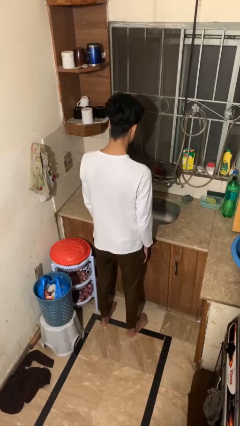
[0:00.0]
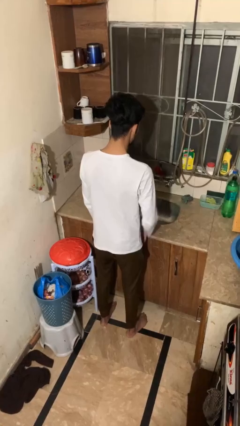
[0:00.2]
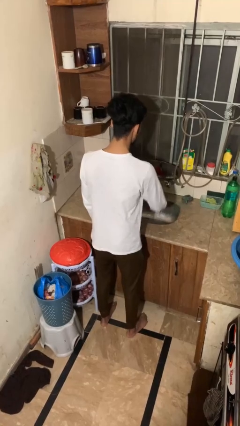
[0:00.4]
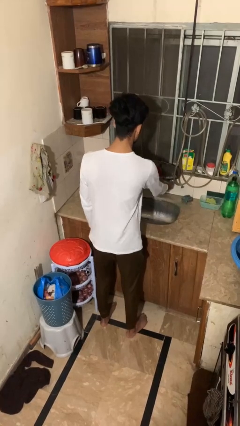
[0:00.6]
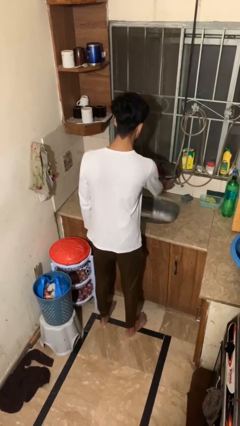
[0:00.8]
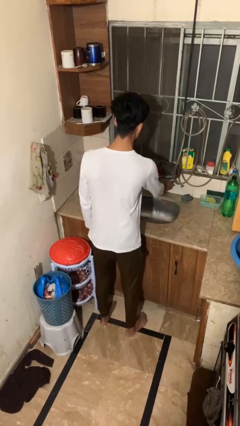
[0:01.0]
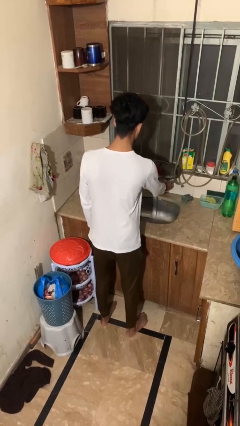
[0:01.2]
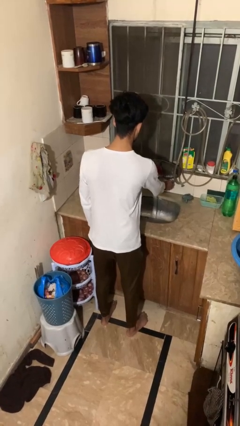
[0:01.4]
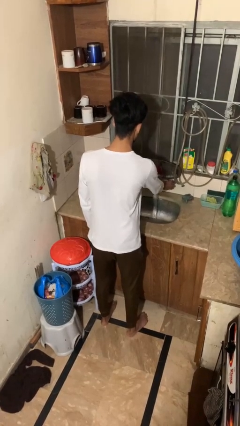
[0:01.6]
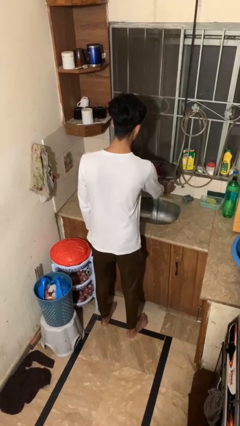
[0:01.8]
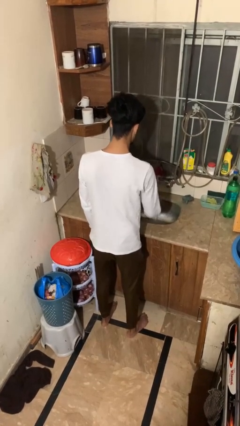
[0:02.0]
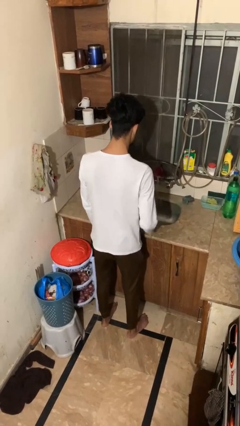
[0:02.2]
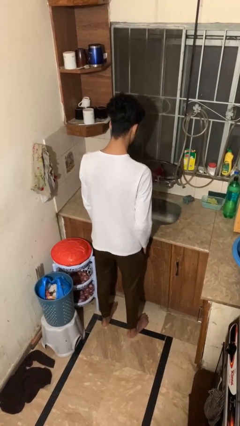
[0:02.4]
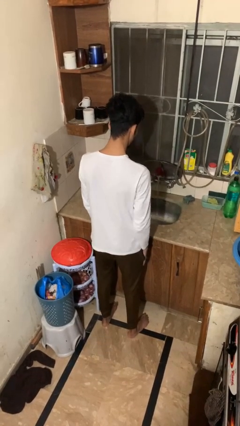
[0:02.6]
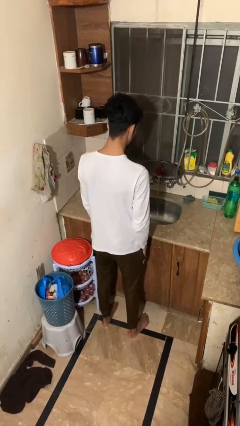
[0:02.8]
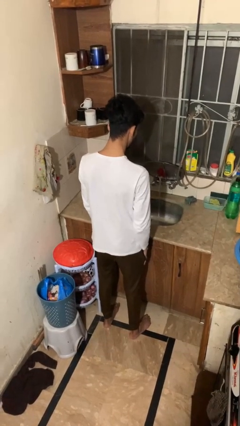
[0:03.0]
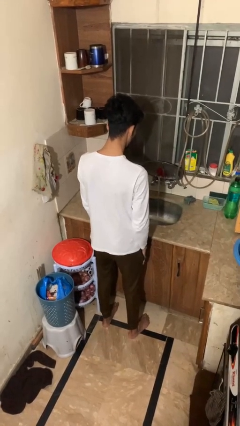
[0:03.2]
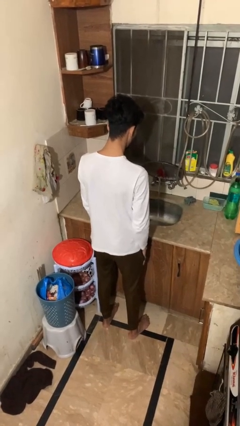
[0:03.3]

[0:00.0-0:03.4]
person turns on faucet

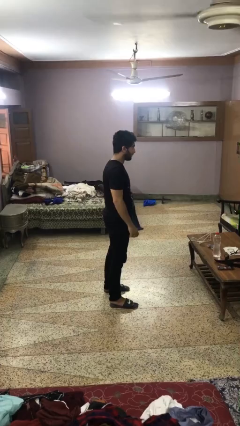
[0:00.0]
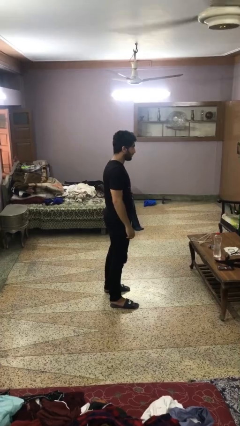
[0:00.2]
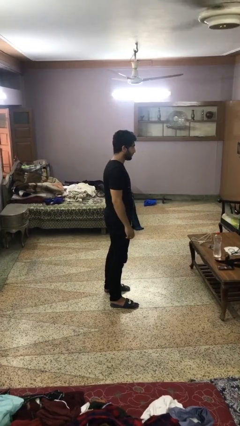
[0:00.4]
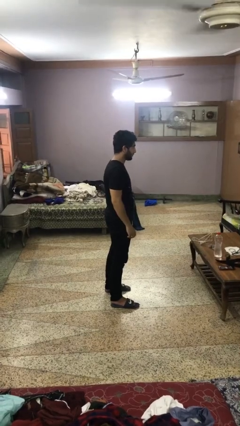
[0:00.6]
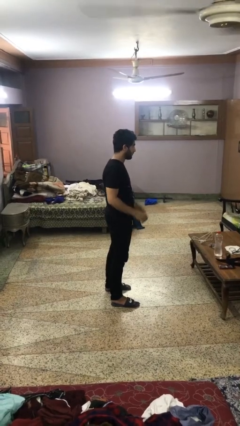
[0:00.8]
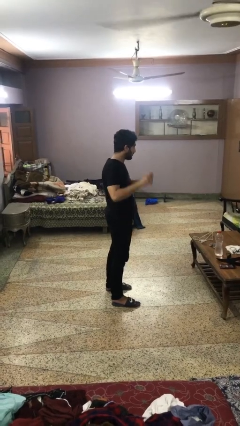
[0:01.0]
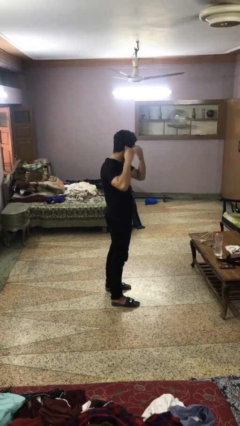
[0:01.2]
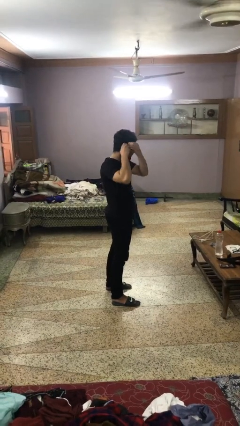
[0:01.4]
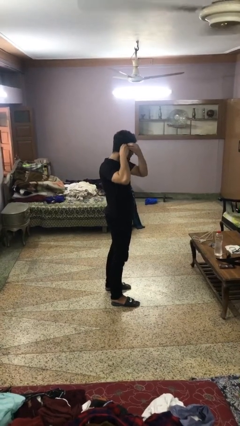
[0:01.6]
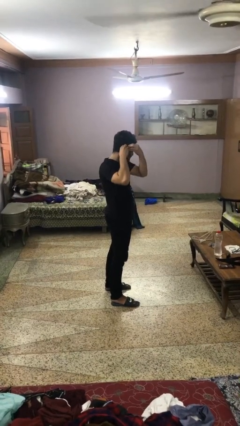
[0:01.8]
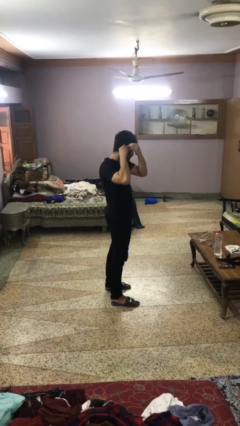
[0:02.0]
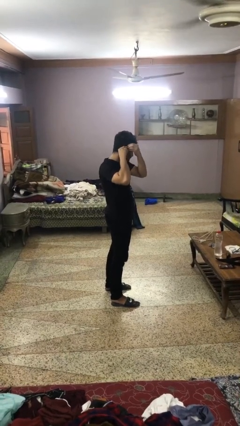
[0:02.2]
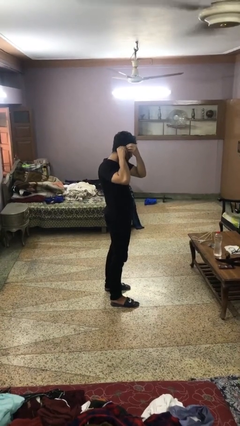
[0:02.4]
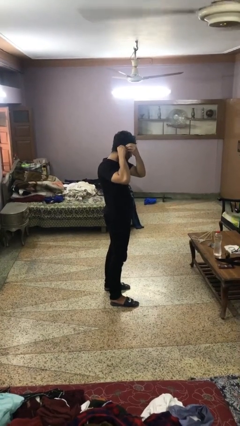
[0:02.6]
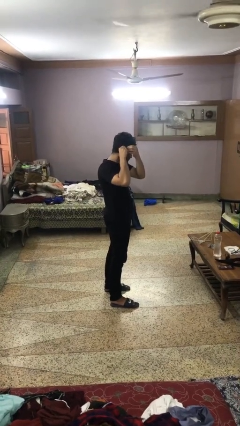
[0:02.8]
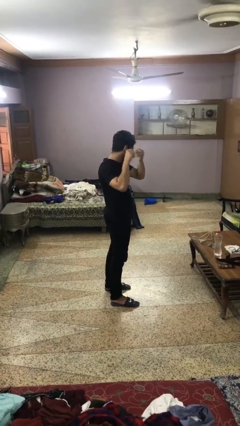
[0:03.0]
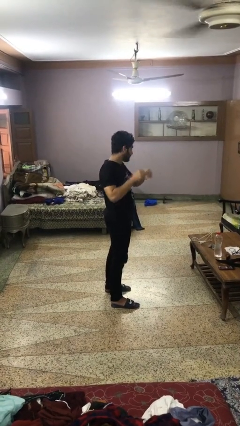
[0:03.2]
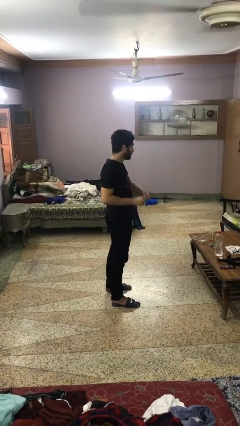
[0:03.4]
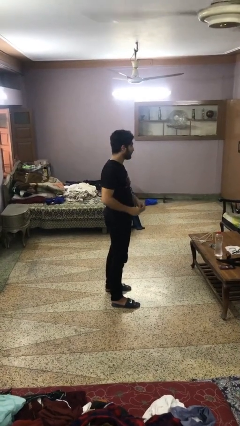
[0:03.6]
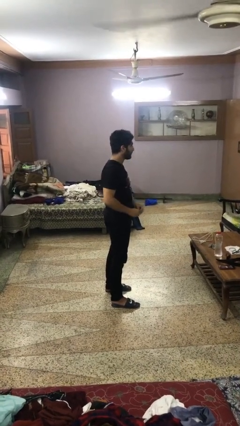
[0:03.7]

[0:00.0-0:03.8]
person takes off earrings

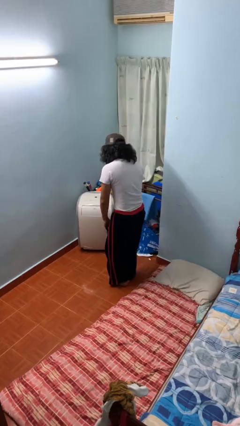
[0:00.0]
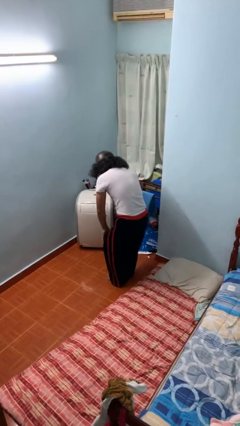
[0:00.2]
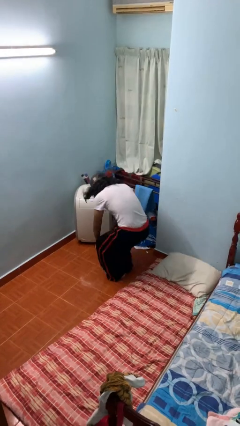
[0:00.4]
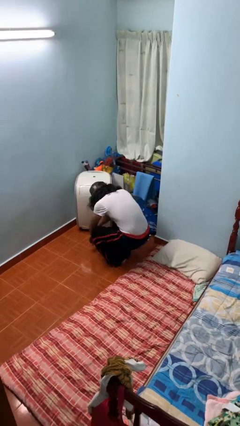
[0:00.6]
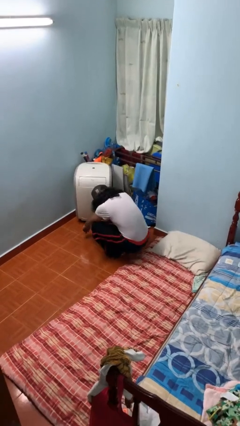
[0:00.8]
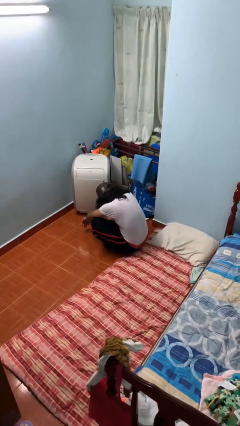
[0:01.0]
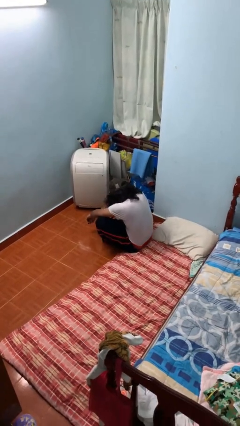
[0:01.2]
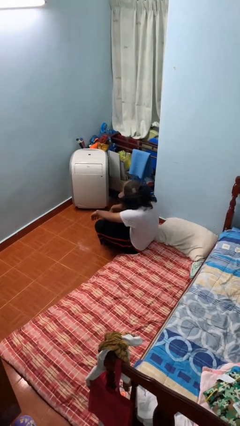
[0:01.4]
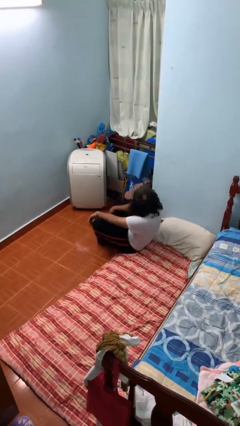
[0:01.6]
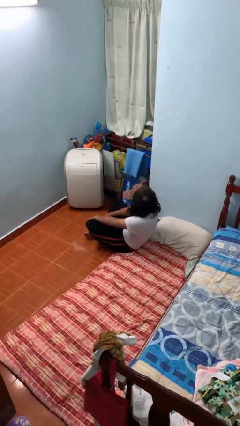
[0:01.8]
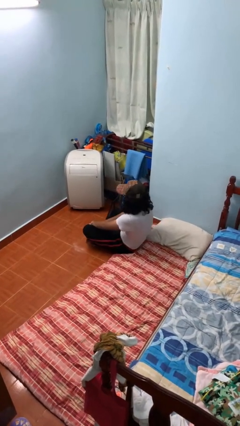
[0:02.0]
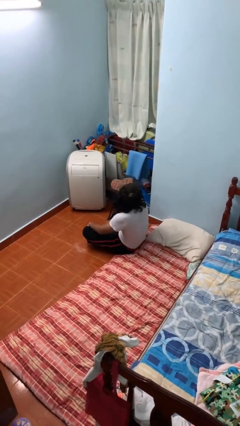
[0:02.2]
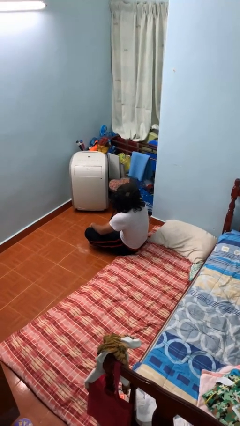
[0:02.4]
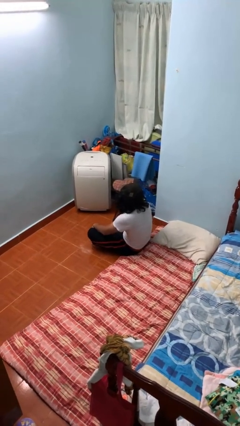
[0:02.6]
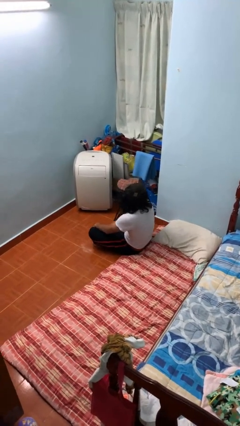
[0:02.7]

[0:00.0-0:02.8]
person sits crisscross

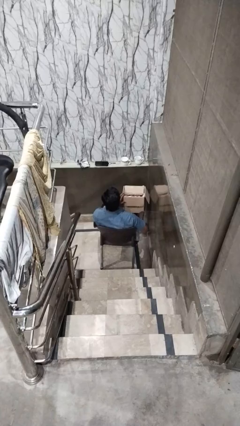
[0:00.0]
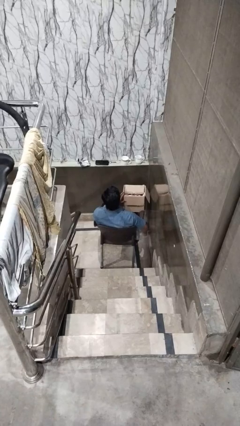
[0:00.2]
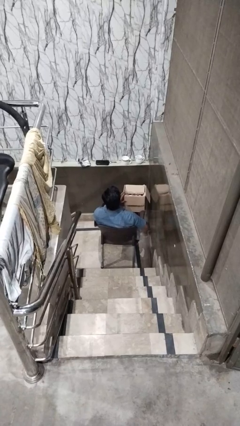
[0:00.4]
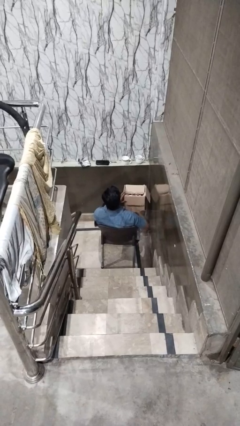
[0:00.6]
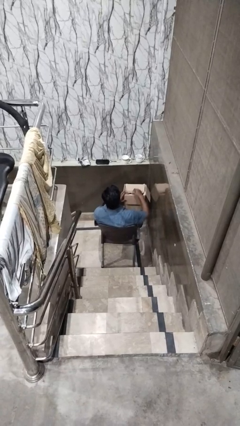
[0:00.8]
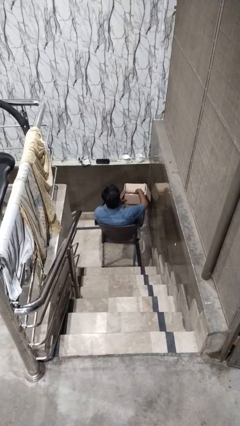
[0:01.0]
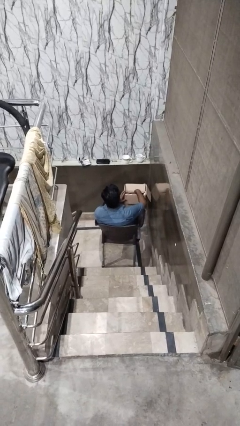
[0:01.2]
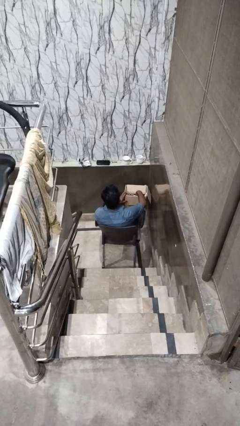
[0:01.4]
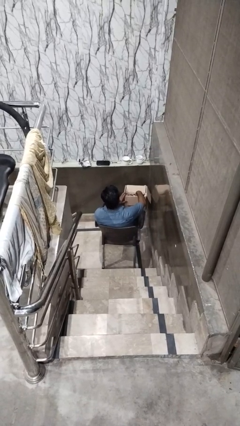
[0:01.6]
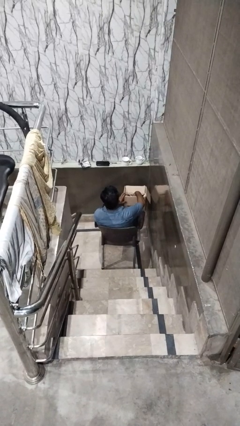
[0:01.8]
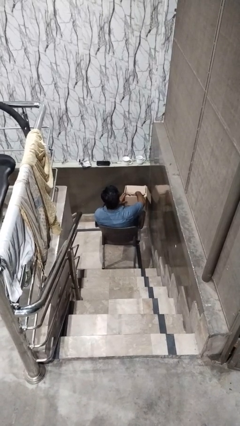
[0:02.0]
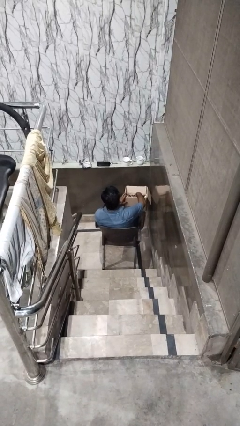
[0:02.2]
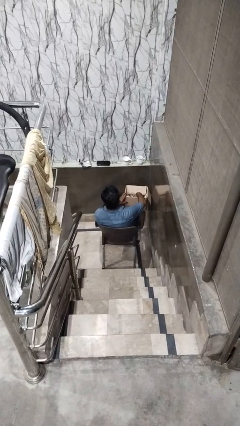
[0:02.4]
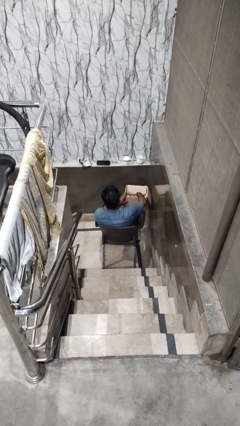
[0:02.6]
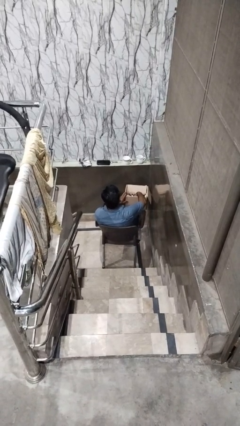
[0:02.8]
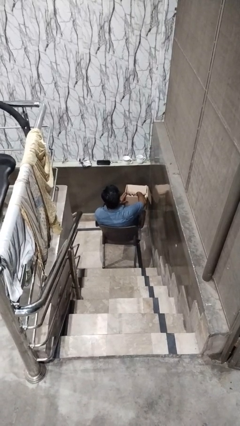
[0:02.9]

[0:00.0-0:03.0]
person searches in box

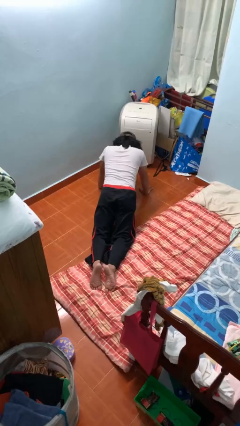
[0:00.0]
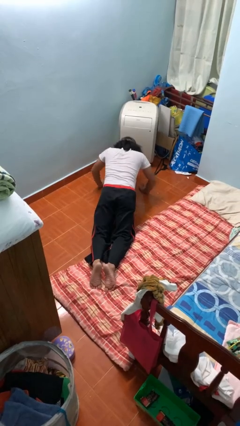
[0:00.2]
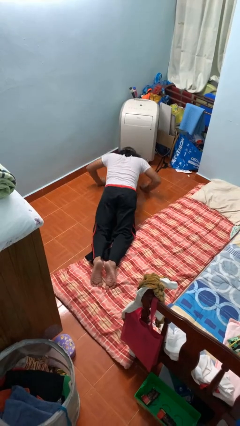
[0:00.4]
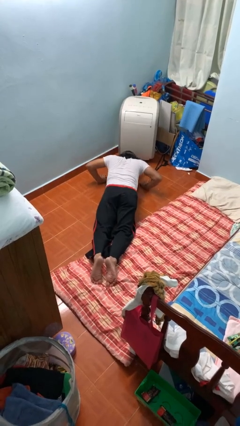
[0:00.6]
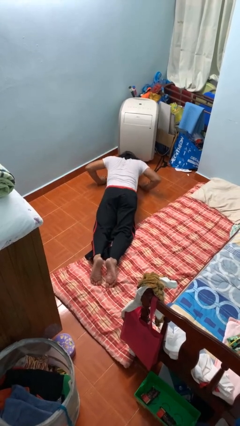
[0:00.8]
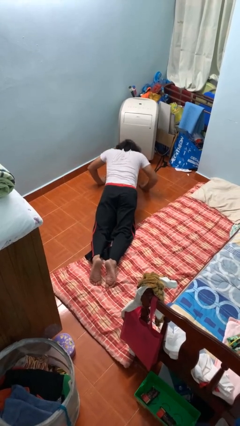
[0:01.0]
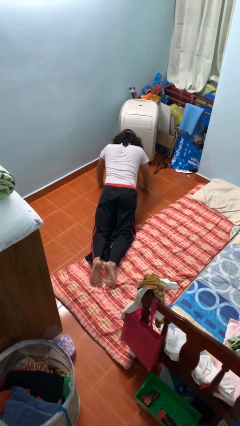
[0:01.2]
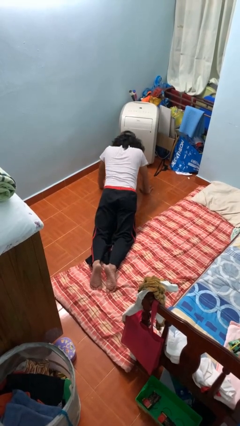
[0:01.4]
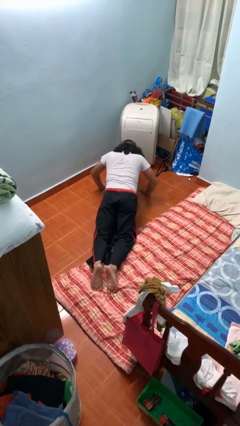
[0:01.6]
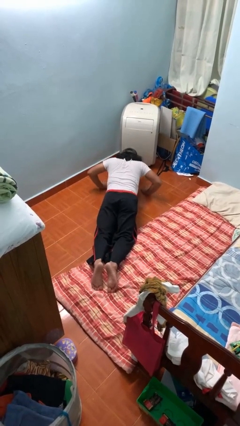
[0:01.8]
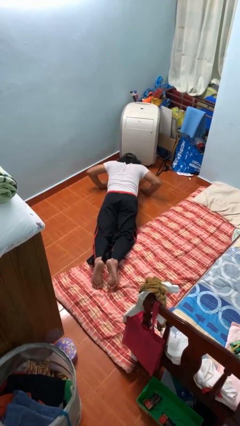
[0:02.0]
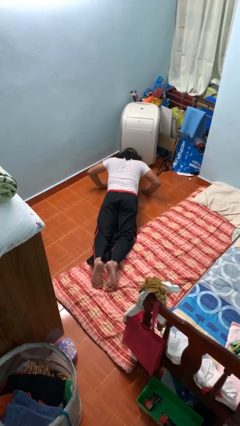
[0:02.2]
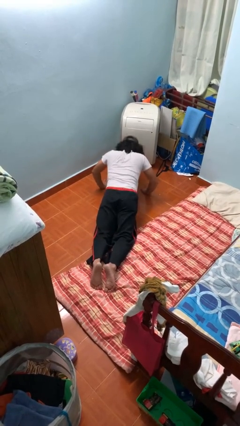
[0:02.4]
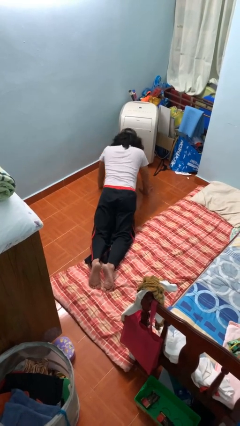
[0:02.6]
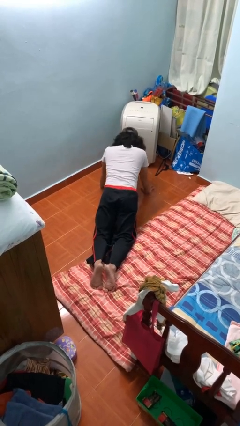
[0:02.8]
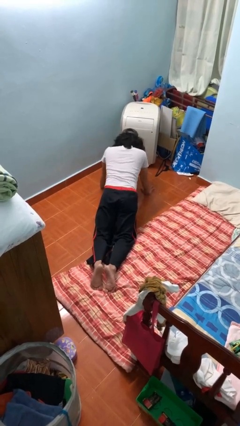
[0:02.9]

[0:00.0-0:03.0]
person exercises with pushup

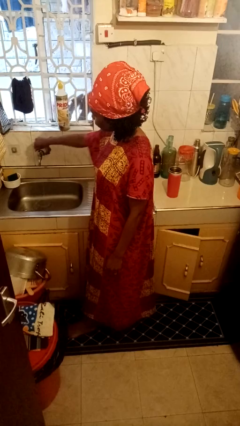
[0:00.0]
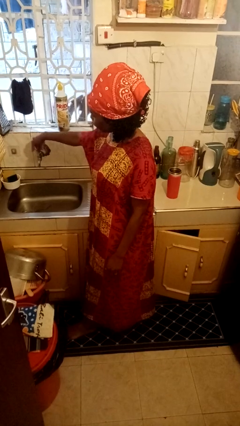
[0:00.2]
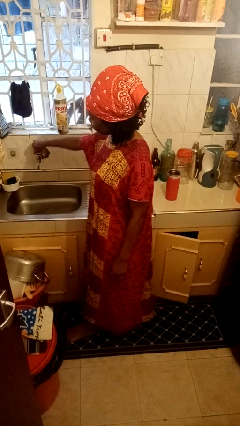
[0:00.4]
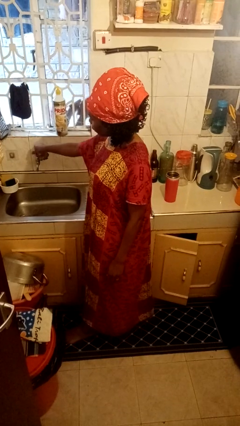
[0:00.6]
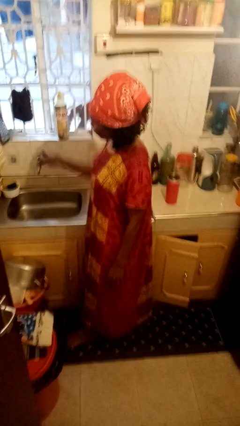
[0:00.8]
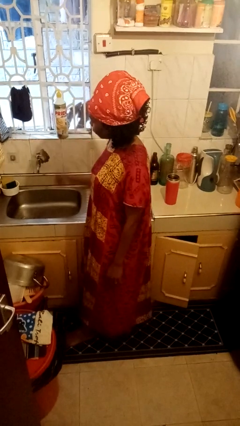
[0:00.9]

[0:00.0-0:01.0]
person turns off faucet
